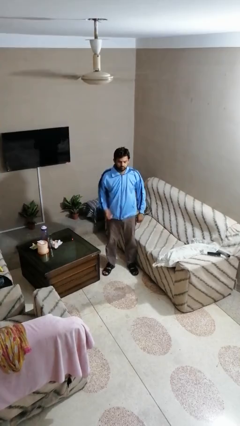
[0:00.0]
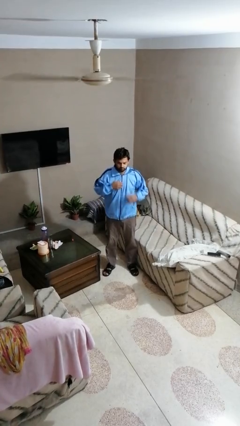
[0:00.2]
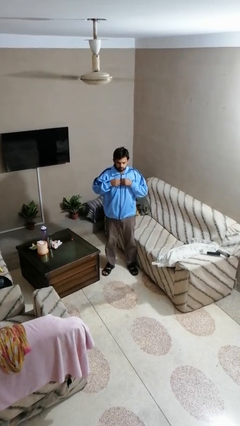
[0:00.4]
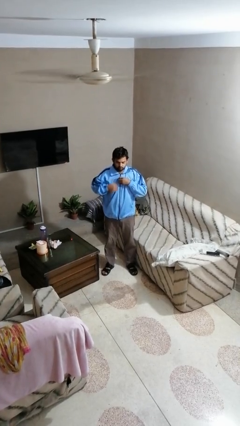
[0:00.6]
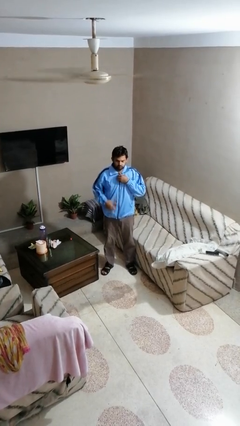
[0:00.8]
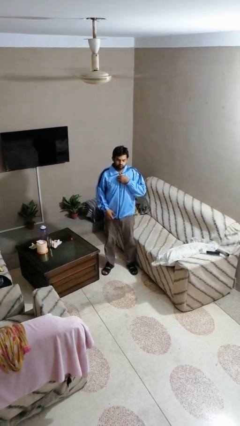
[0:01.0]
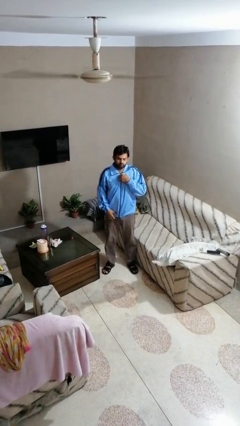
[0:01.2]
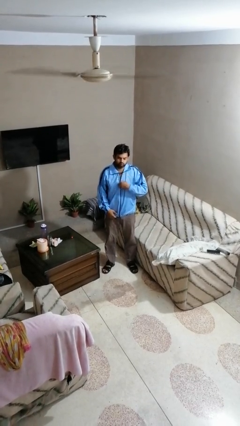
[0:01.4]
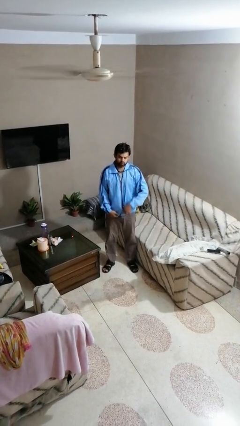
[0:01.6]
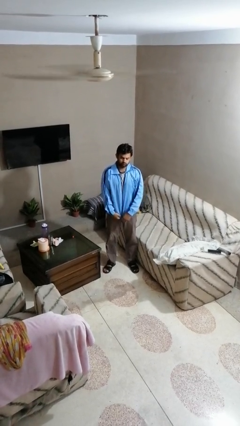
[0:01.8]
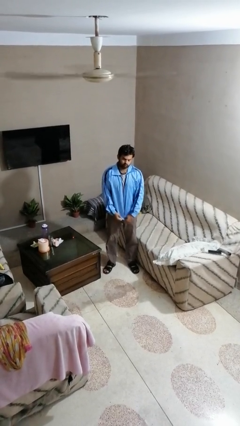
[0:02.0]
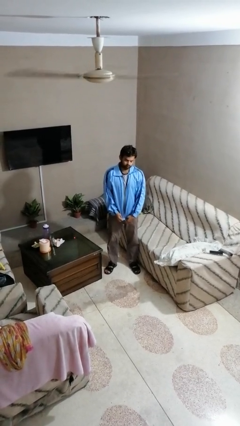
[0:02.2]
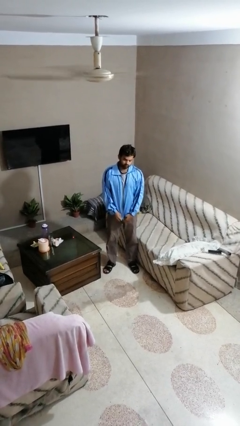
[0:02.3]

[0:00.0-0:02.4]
person unzips jacket

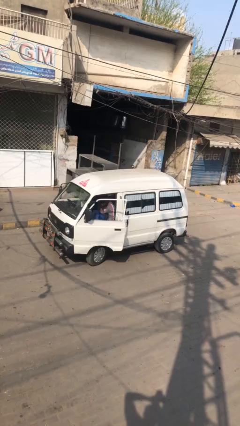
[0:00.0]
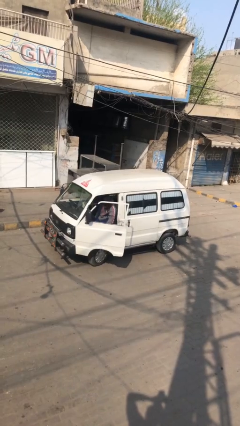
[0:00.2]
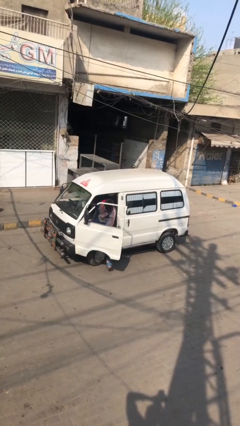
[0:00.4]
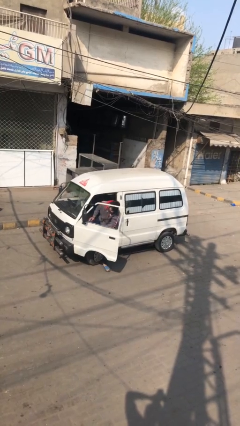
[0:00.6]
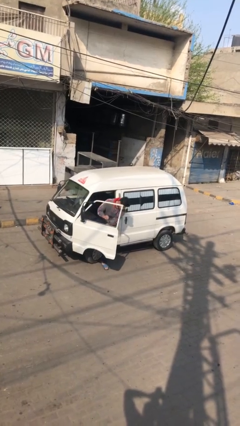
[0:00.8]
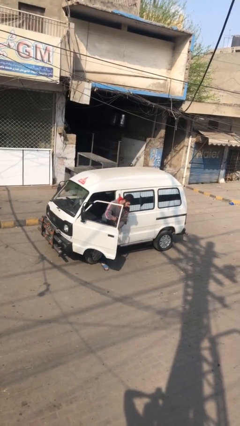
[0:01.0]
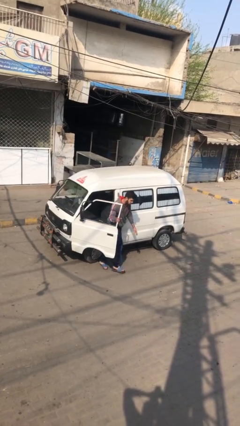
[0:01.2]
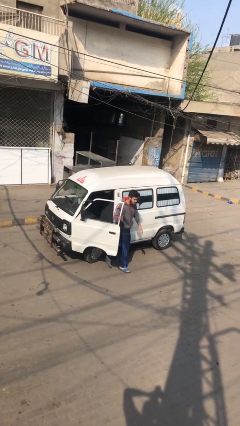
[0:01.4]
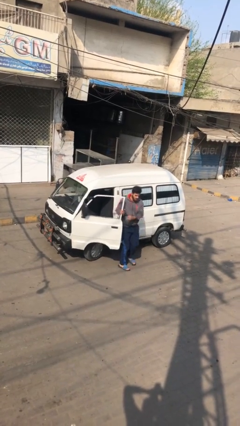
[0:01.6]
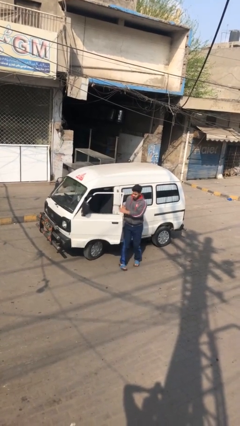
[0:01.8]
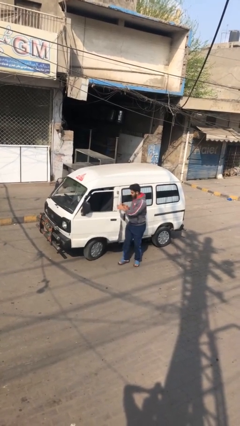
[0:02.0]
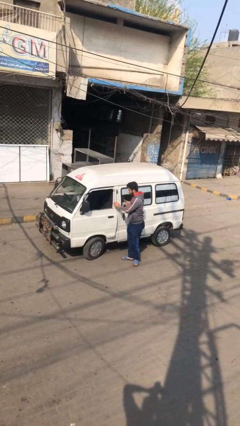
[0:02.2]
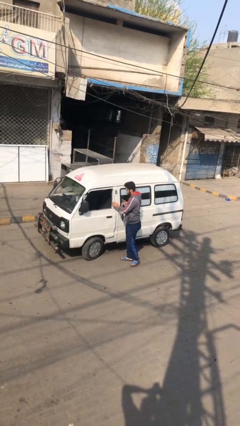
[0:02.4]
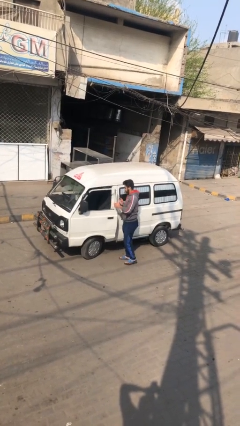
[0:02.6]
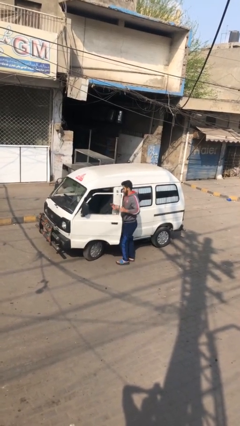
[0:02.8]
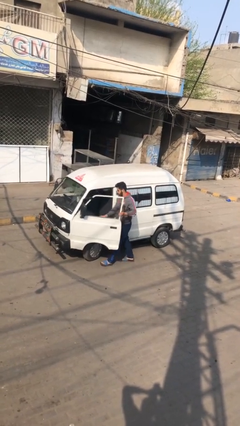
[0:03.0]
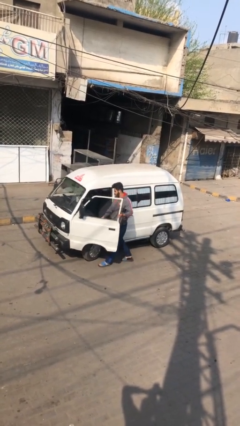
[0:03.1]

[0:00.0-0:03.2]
car drops off person

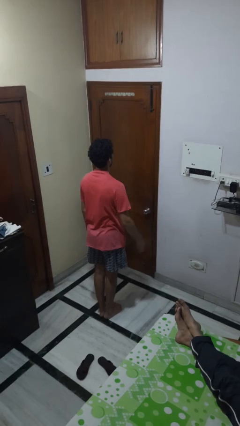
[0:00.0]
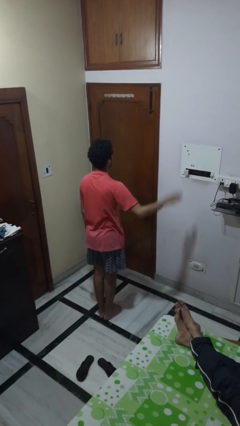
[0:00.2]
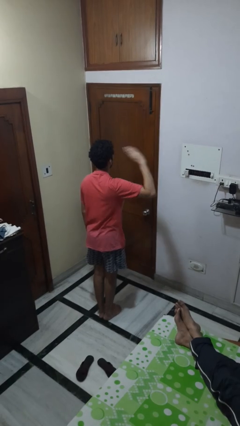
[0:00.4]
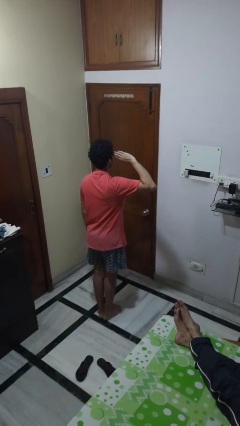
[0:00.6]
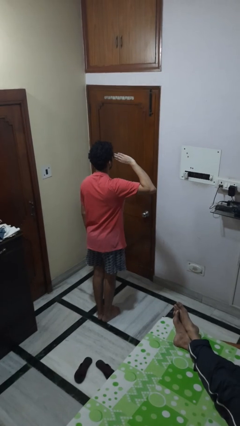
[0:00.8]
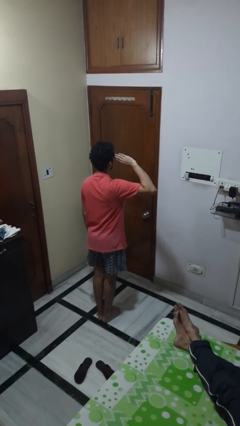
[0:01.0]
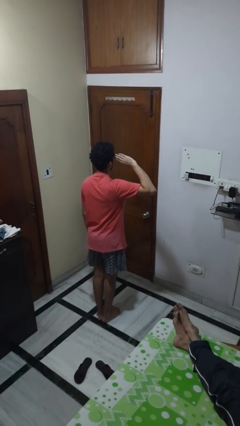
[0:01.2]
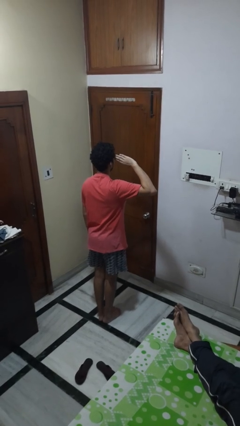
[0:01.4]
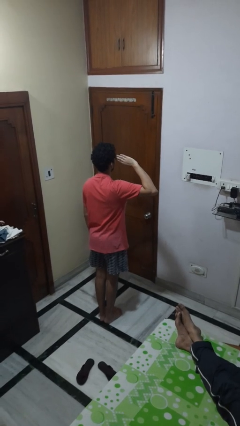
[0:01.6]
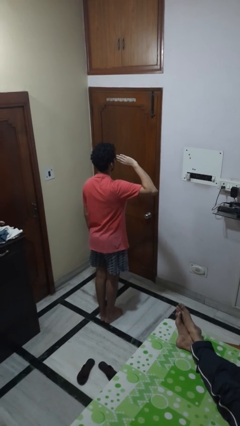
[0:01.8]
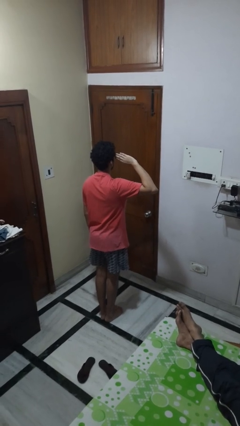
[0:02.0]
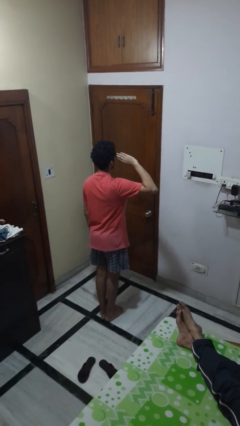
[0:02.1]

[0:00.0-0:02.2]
person salutes

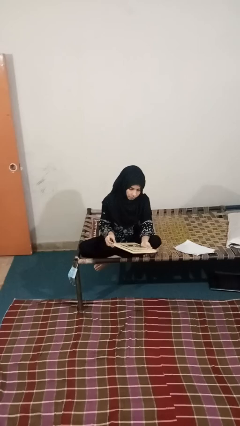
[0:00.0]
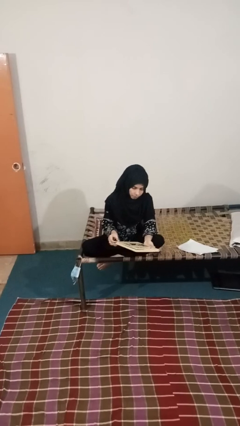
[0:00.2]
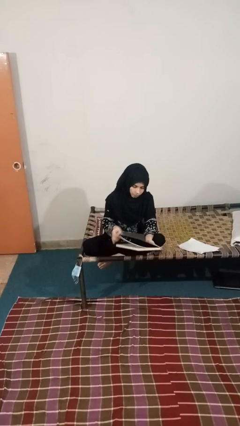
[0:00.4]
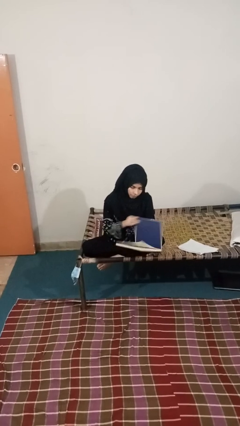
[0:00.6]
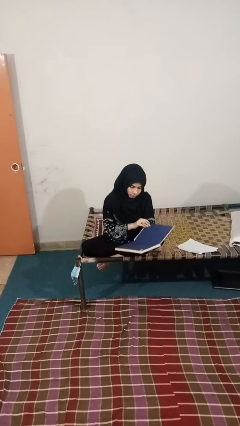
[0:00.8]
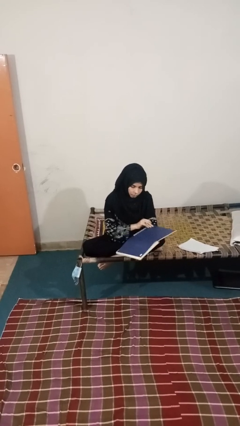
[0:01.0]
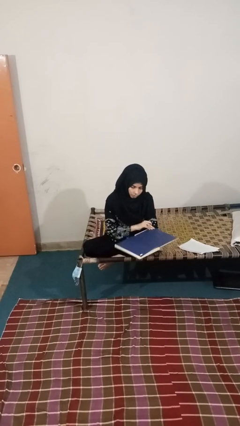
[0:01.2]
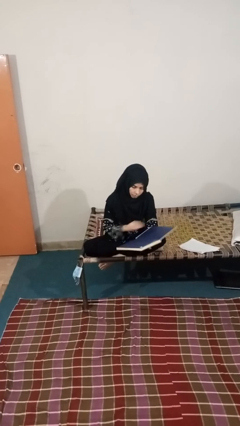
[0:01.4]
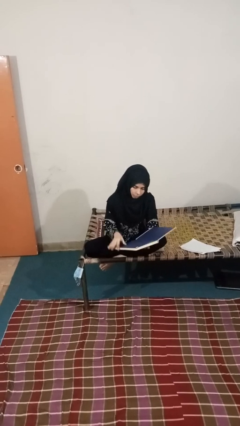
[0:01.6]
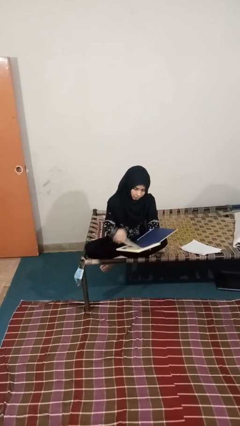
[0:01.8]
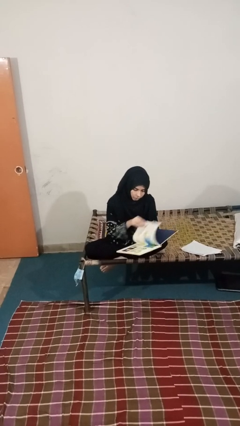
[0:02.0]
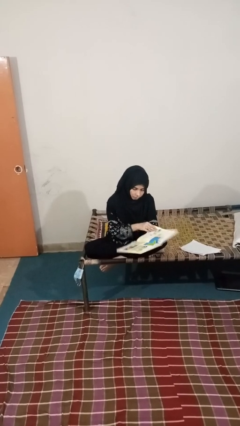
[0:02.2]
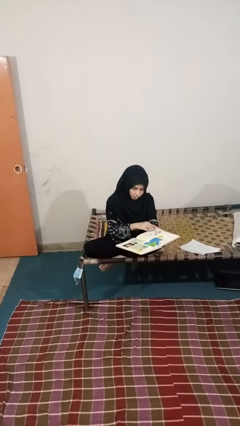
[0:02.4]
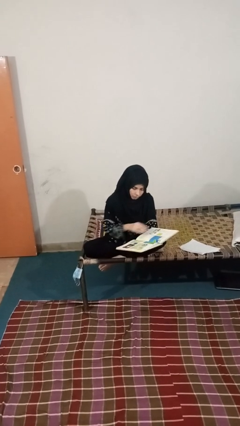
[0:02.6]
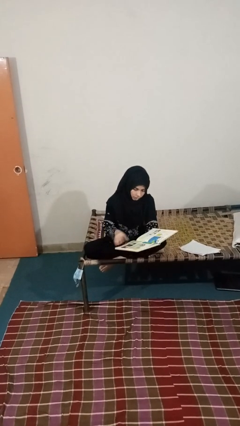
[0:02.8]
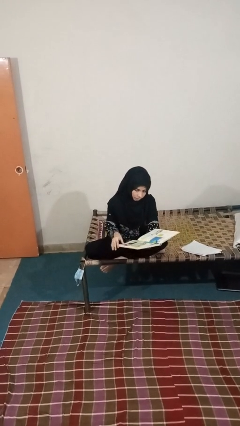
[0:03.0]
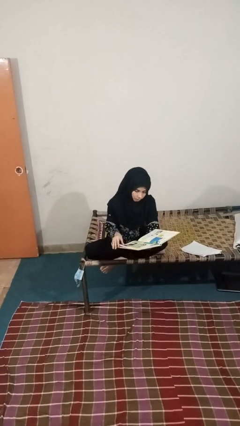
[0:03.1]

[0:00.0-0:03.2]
person reads magazine

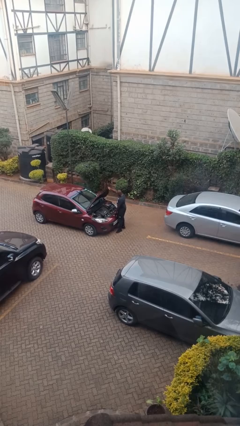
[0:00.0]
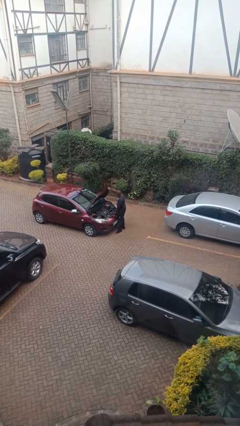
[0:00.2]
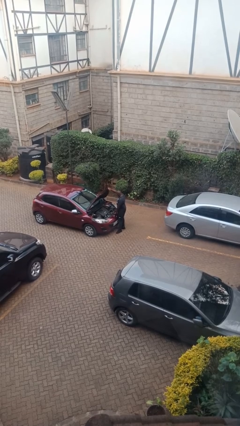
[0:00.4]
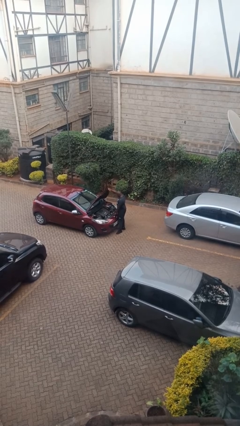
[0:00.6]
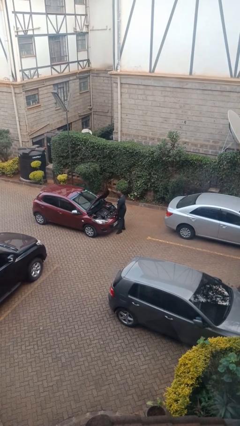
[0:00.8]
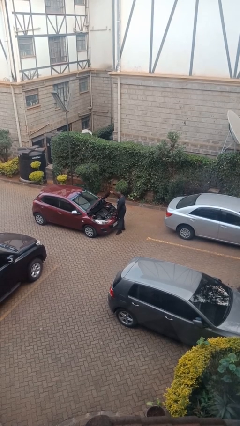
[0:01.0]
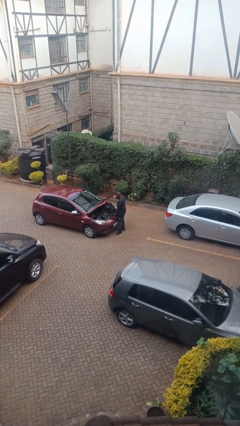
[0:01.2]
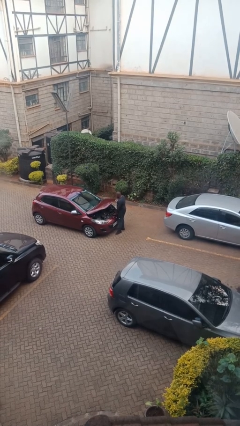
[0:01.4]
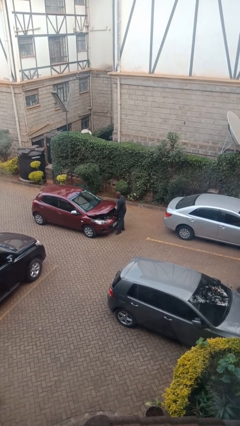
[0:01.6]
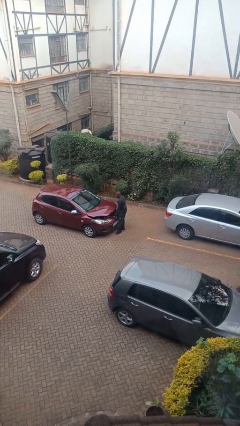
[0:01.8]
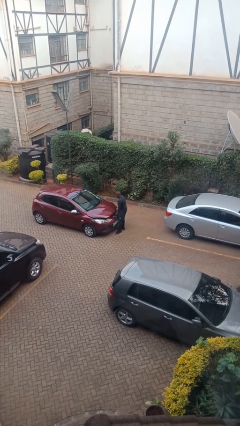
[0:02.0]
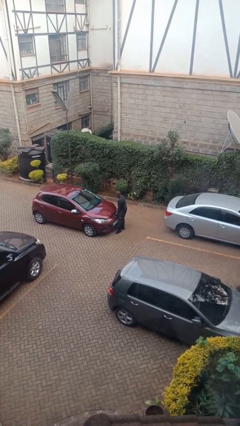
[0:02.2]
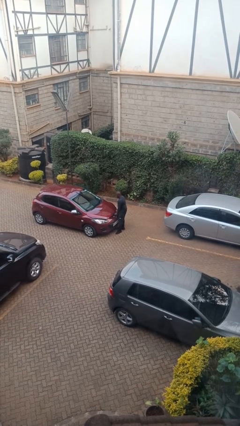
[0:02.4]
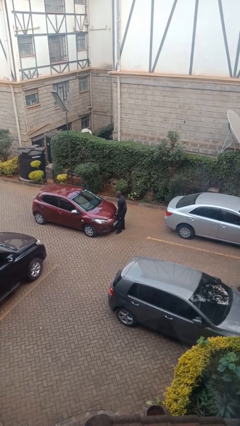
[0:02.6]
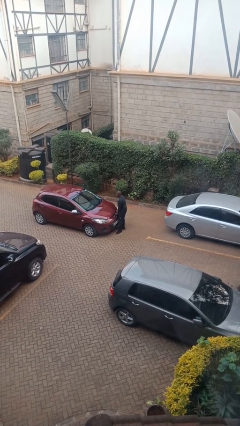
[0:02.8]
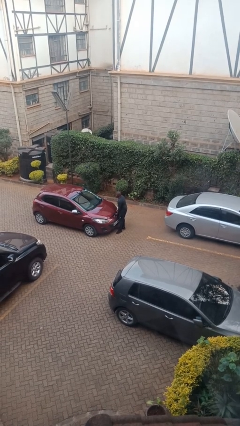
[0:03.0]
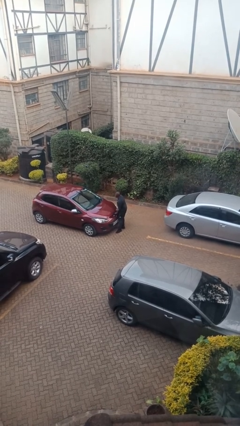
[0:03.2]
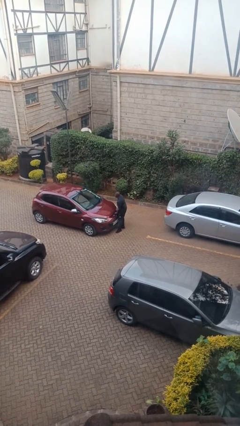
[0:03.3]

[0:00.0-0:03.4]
person closes car hood

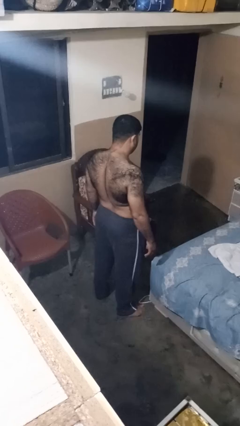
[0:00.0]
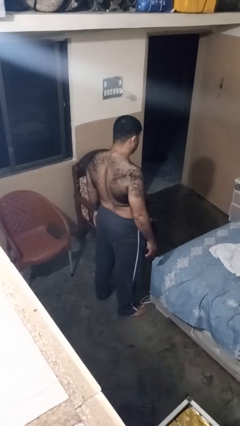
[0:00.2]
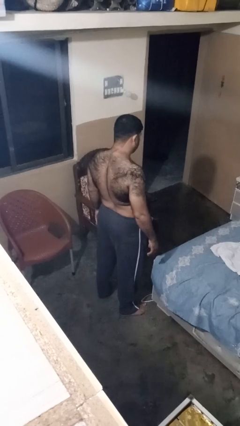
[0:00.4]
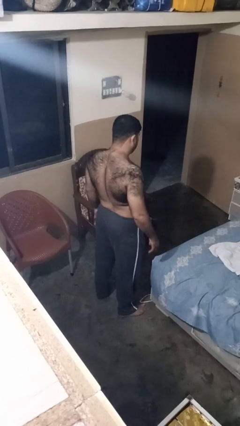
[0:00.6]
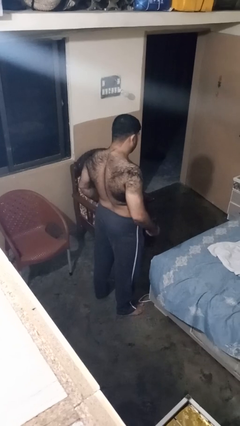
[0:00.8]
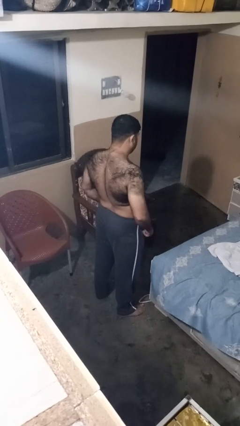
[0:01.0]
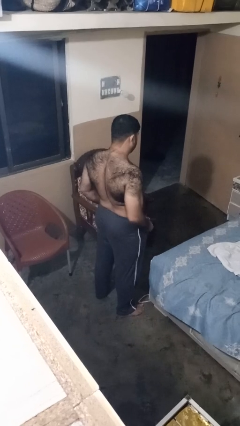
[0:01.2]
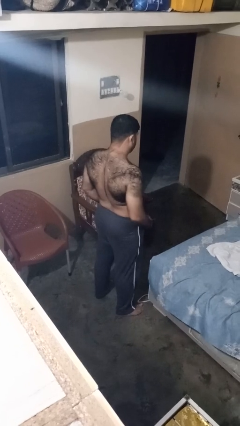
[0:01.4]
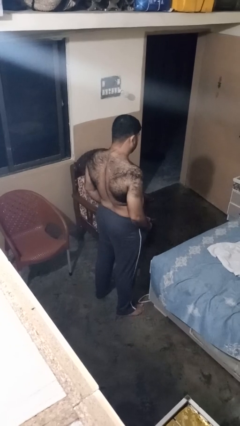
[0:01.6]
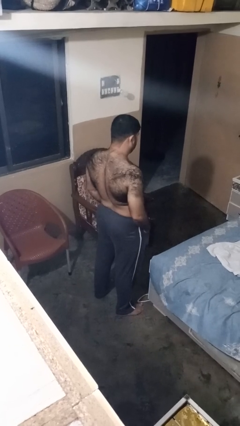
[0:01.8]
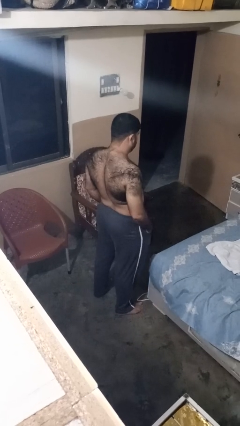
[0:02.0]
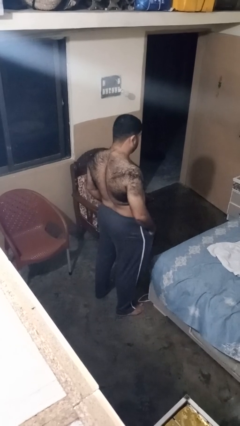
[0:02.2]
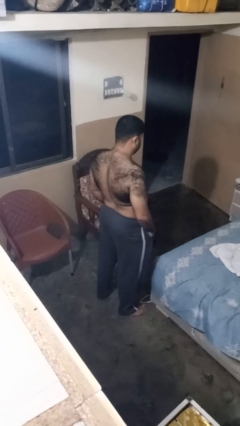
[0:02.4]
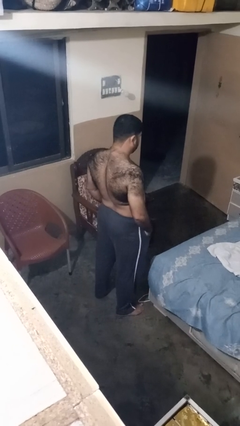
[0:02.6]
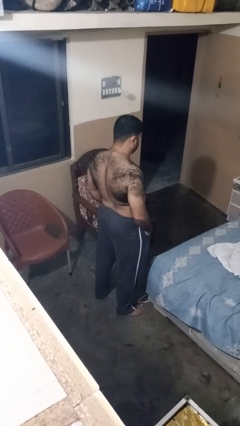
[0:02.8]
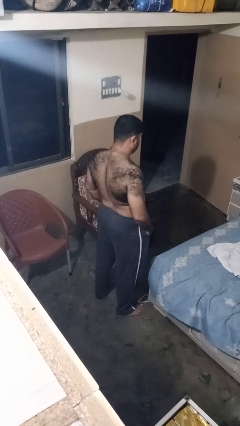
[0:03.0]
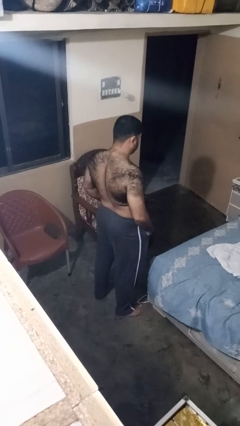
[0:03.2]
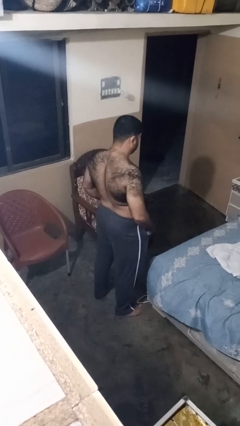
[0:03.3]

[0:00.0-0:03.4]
person puts hands in back pockets
